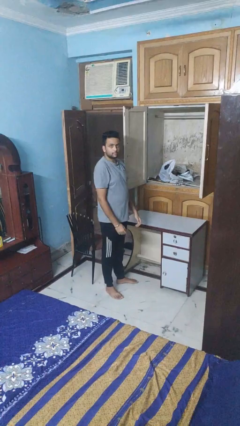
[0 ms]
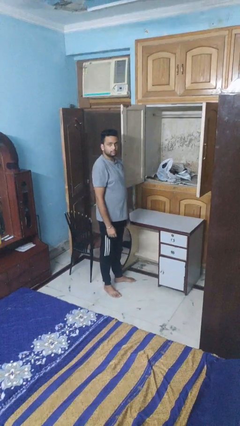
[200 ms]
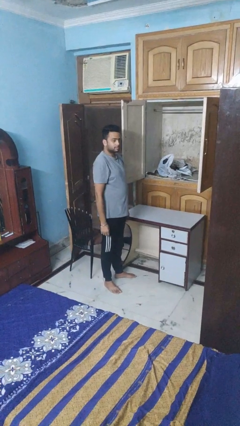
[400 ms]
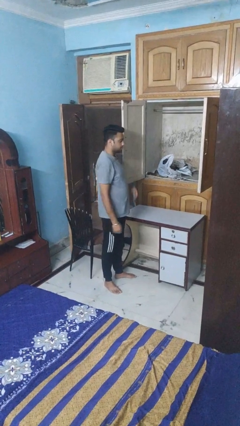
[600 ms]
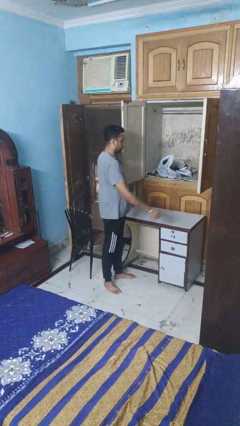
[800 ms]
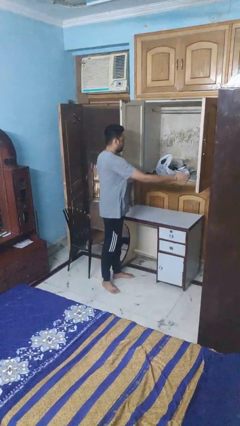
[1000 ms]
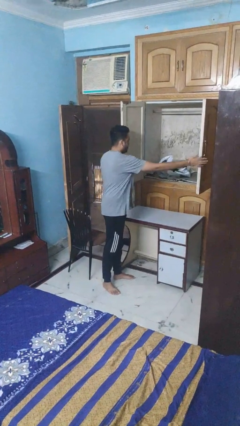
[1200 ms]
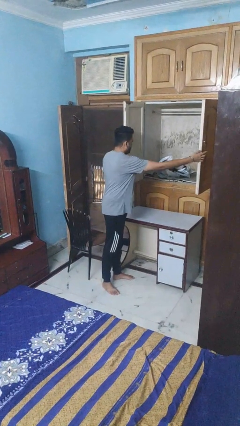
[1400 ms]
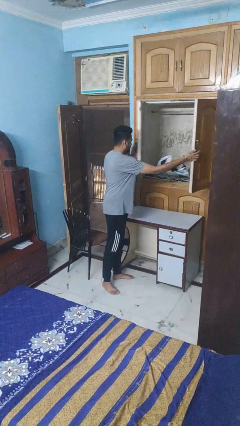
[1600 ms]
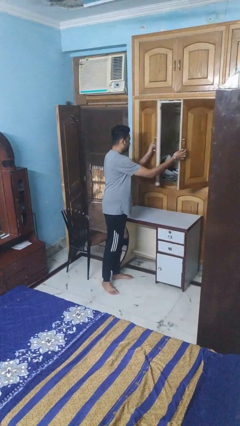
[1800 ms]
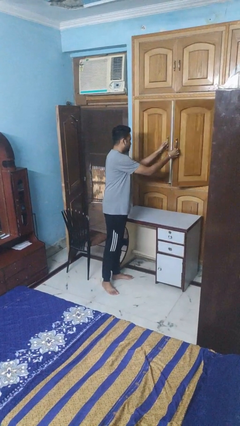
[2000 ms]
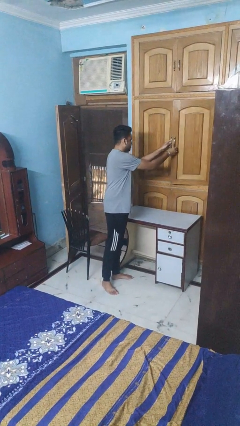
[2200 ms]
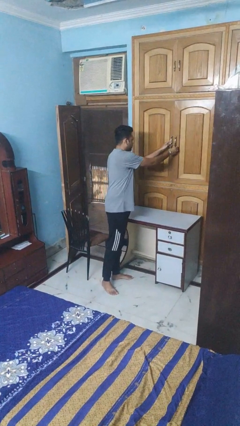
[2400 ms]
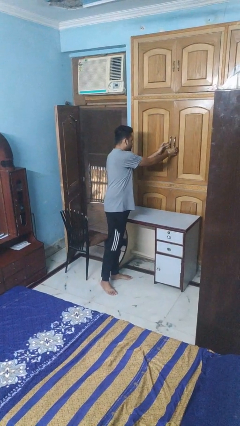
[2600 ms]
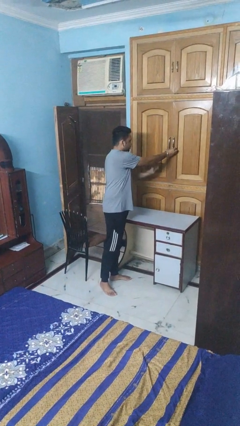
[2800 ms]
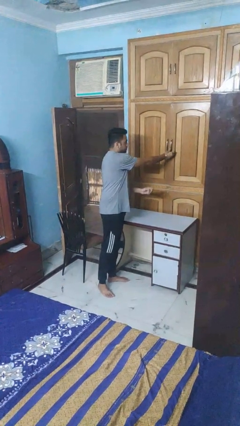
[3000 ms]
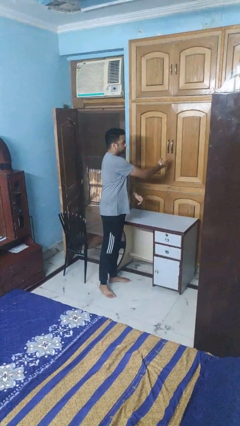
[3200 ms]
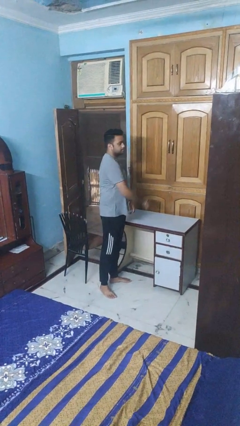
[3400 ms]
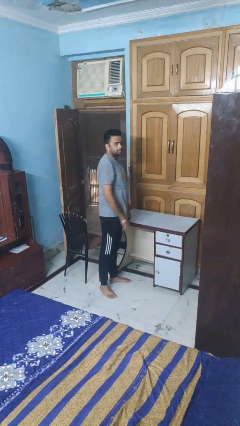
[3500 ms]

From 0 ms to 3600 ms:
person closes closet door

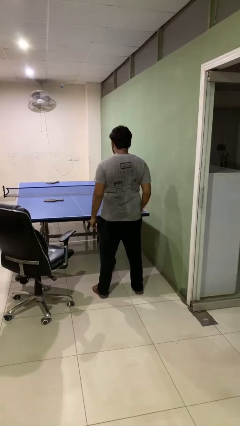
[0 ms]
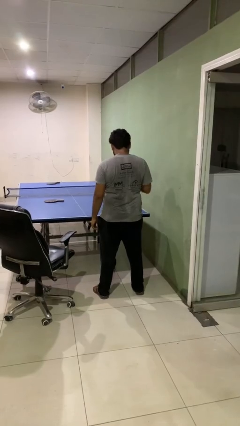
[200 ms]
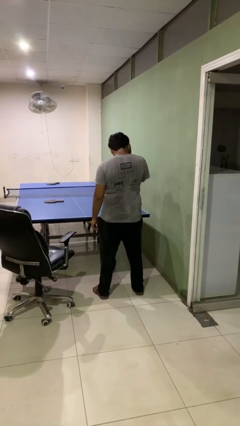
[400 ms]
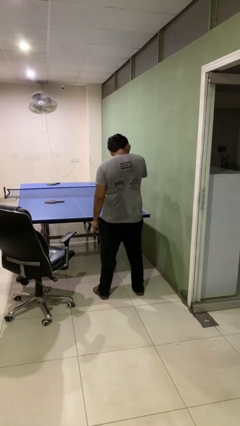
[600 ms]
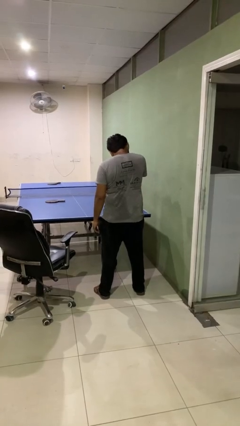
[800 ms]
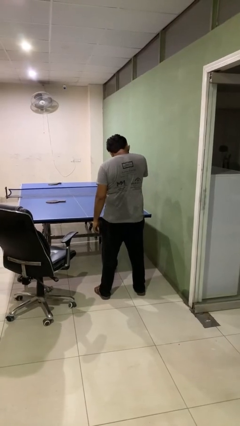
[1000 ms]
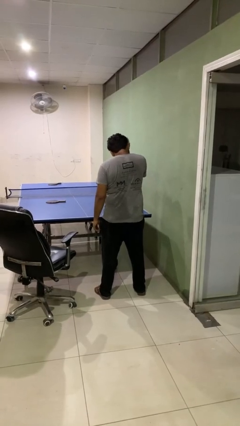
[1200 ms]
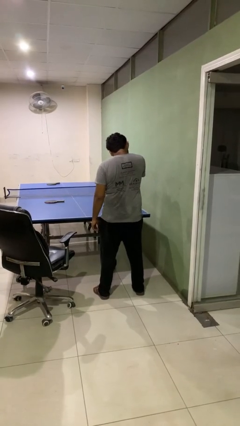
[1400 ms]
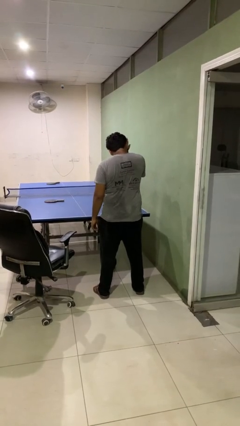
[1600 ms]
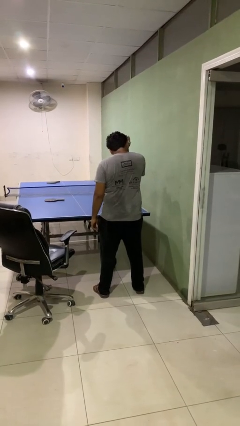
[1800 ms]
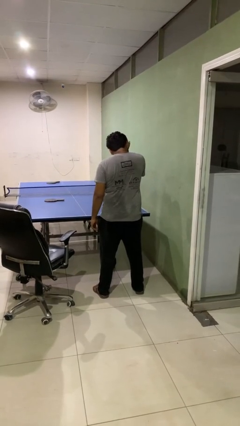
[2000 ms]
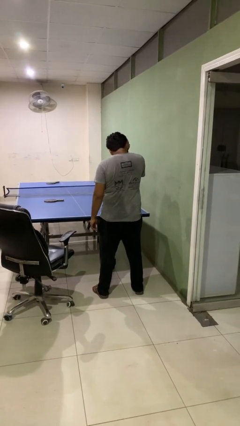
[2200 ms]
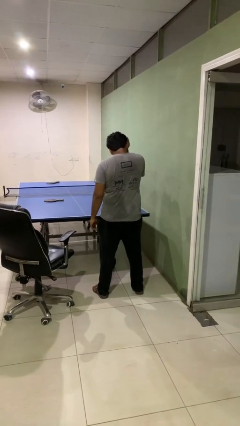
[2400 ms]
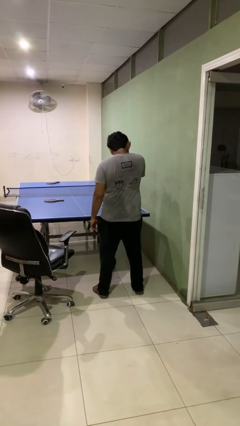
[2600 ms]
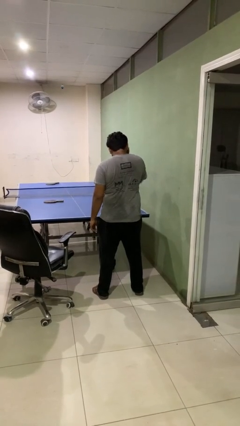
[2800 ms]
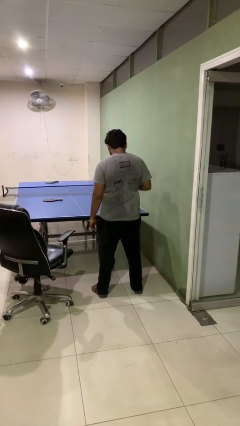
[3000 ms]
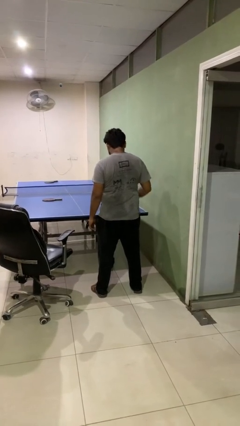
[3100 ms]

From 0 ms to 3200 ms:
person rubs eyes

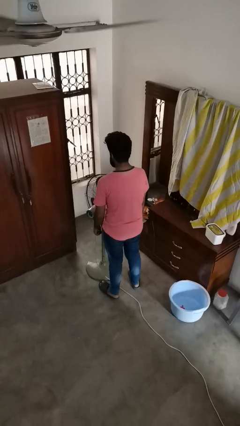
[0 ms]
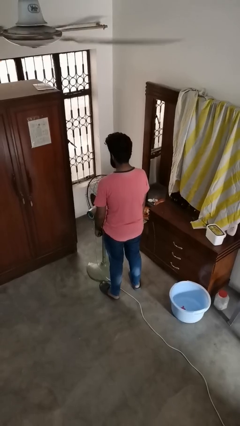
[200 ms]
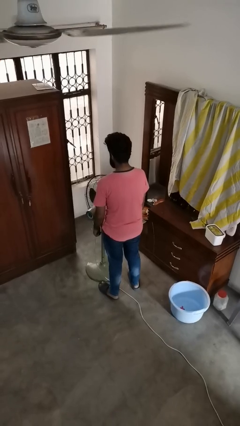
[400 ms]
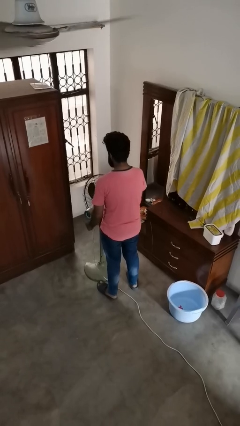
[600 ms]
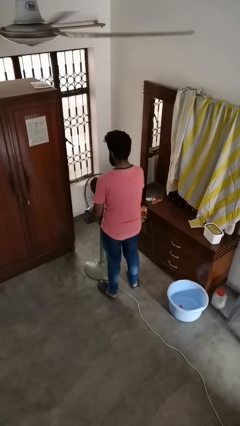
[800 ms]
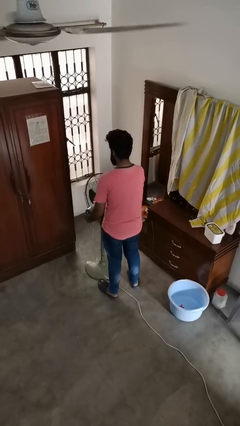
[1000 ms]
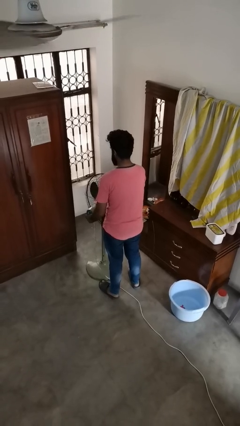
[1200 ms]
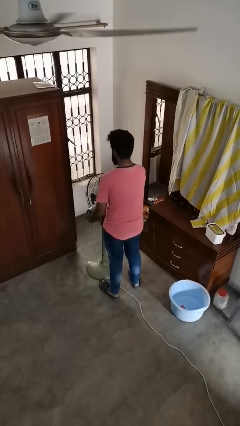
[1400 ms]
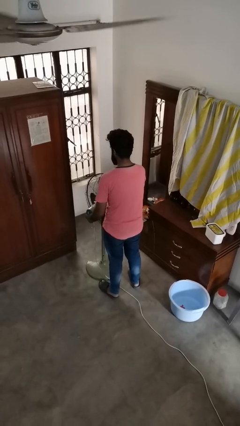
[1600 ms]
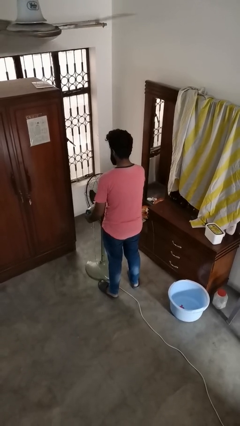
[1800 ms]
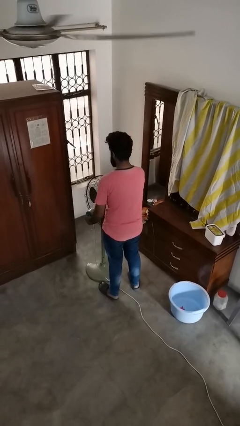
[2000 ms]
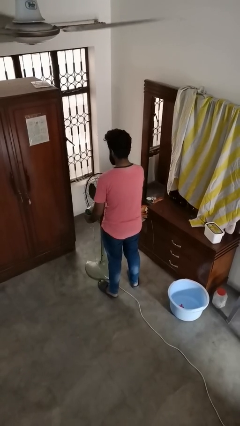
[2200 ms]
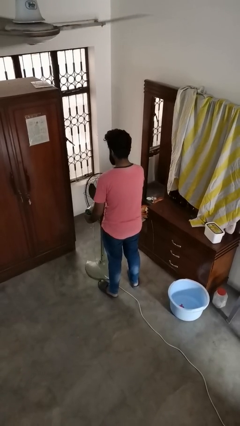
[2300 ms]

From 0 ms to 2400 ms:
person turns off fan

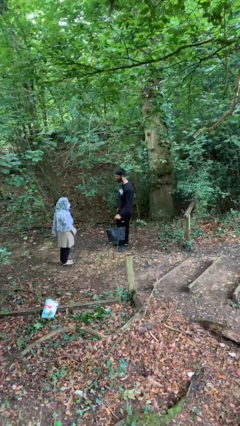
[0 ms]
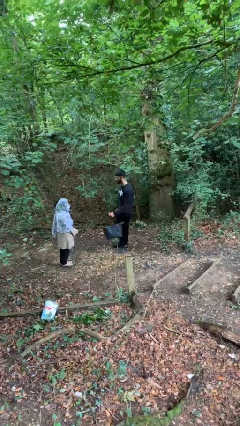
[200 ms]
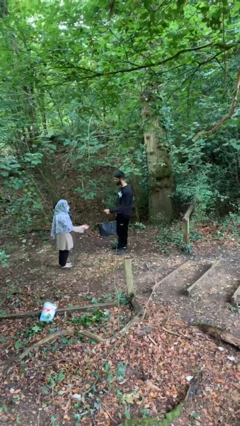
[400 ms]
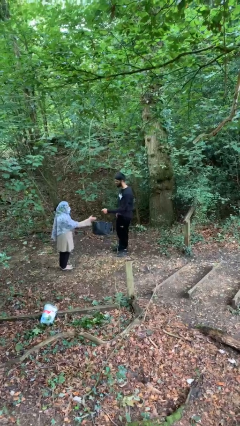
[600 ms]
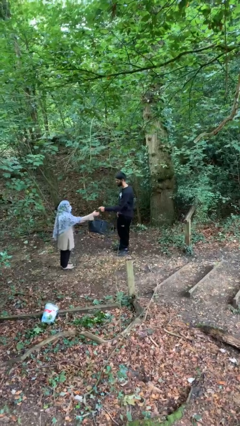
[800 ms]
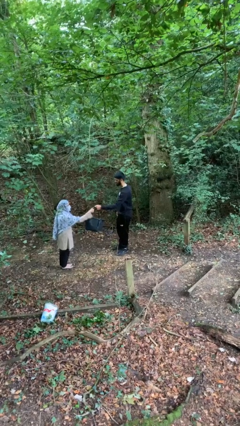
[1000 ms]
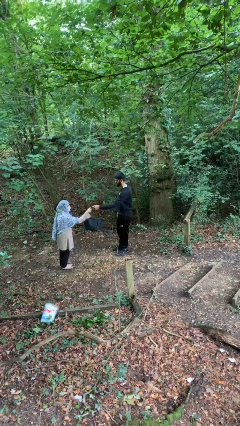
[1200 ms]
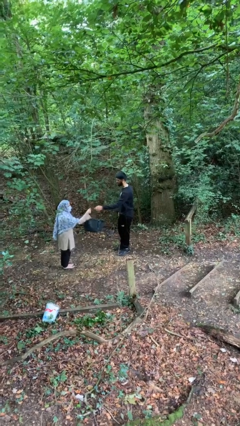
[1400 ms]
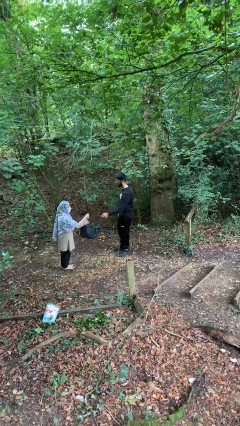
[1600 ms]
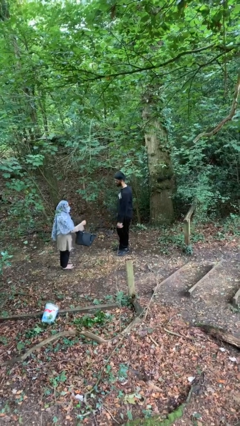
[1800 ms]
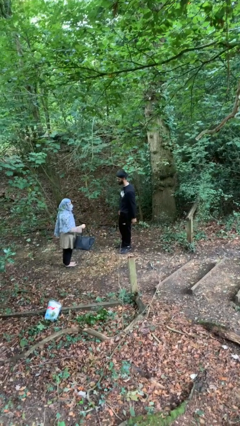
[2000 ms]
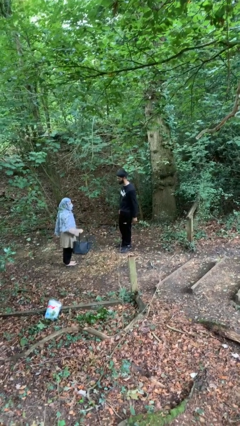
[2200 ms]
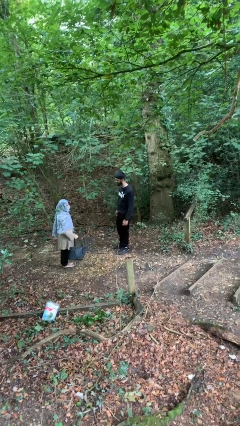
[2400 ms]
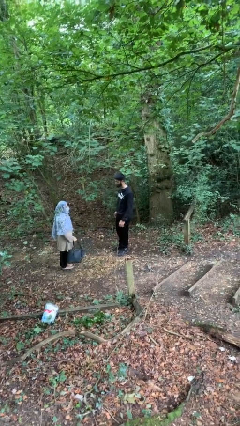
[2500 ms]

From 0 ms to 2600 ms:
person transfers object to person

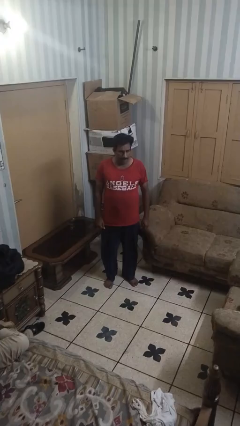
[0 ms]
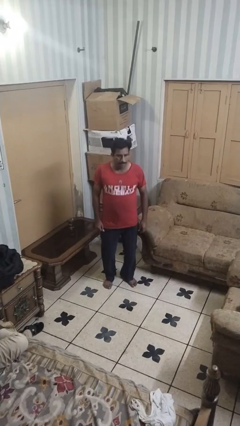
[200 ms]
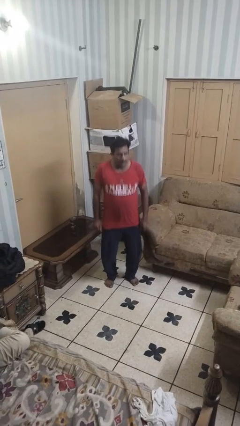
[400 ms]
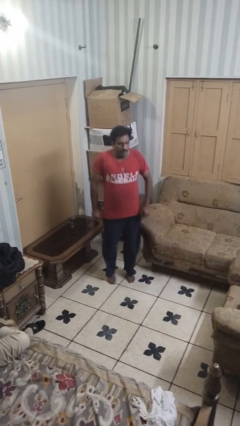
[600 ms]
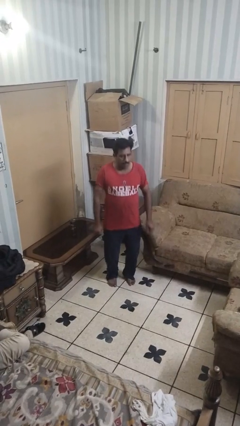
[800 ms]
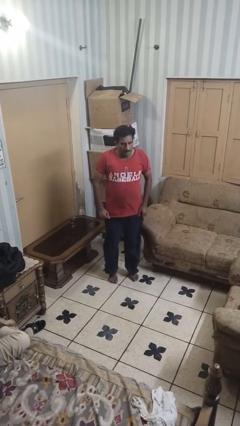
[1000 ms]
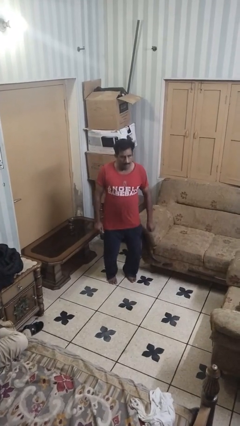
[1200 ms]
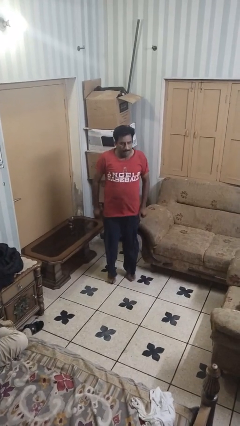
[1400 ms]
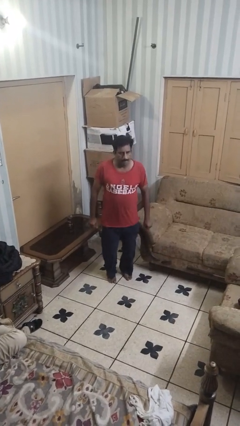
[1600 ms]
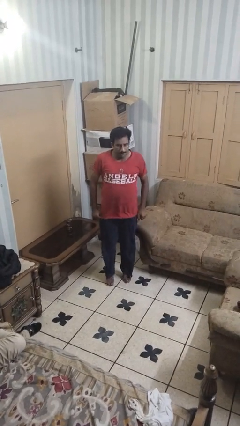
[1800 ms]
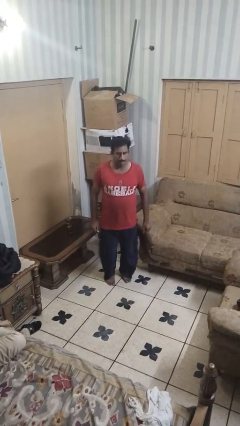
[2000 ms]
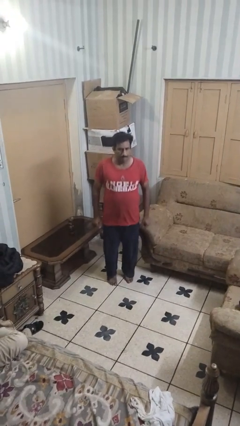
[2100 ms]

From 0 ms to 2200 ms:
person jumps

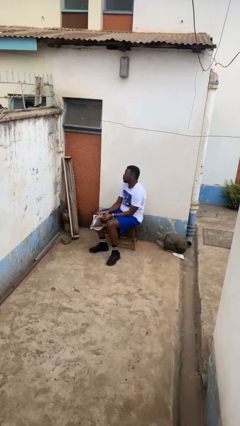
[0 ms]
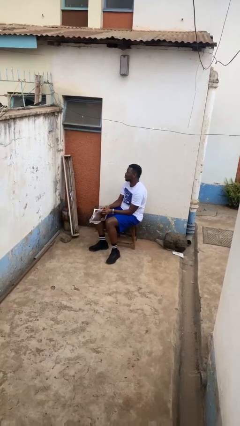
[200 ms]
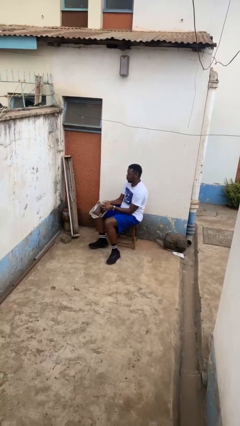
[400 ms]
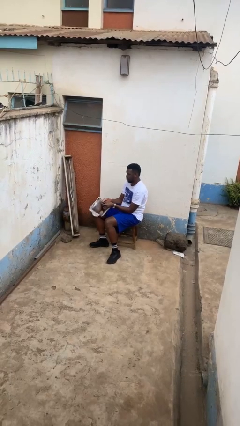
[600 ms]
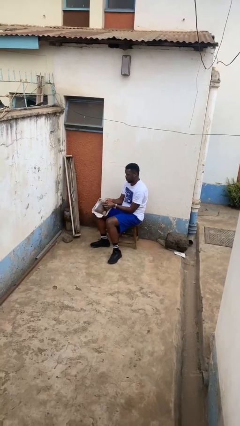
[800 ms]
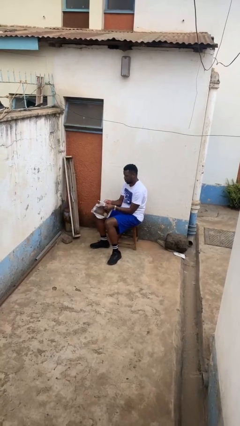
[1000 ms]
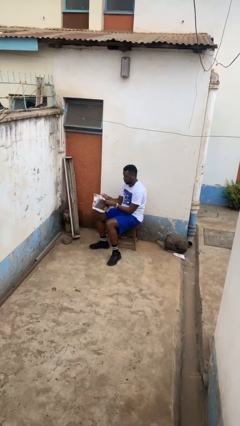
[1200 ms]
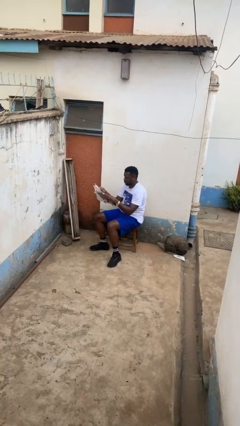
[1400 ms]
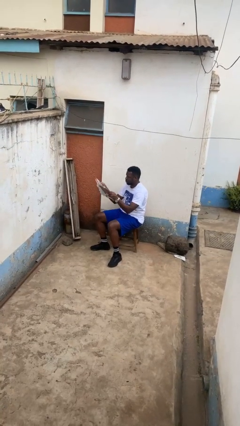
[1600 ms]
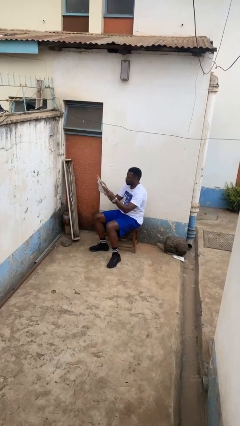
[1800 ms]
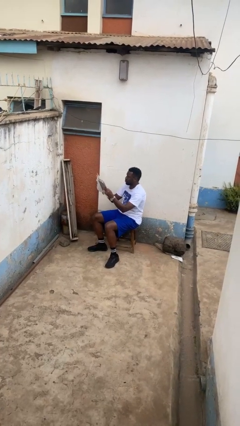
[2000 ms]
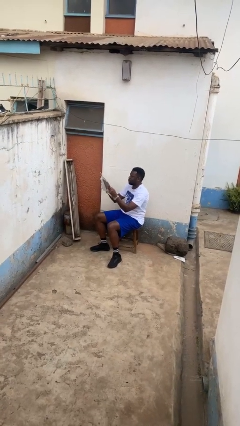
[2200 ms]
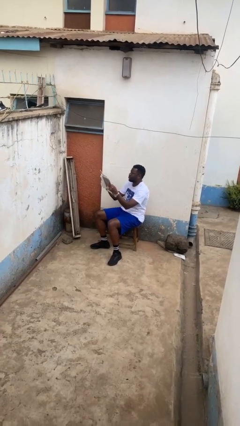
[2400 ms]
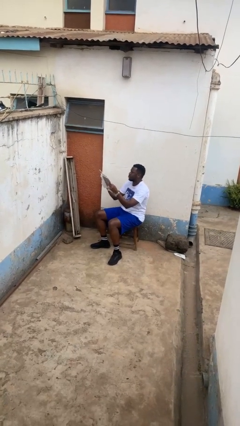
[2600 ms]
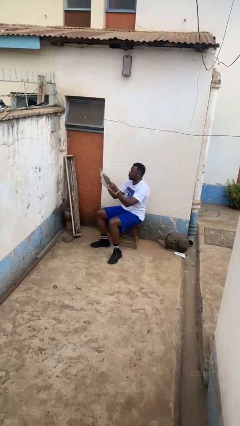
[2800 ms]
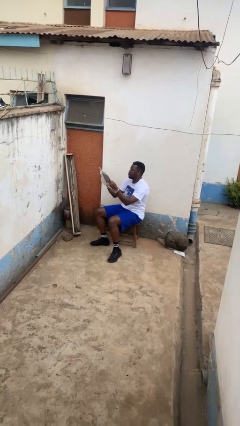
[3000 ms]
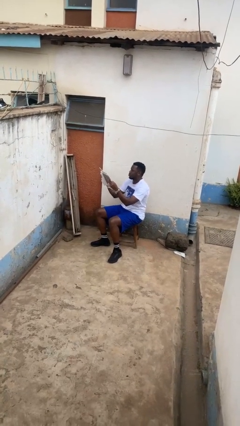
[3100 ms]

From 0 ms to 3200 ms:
person reads magazine
